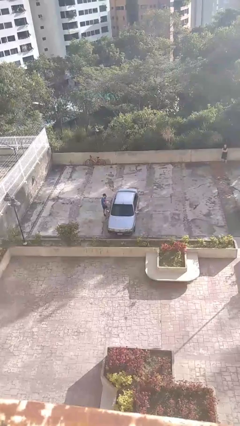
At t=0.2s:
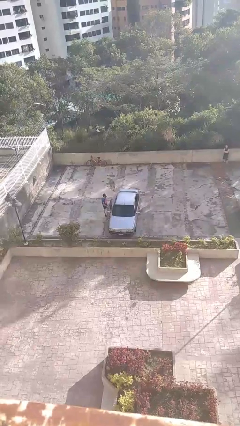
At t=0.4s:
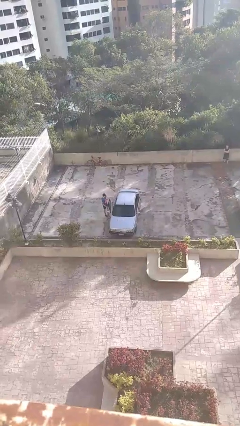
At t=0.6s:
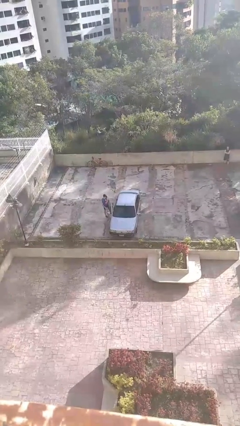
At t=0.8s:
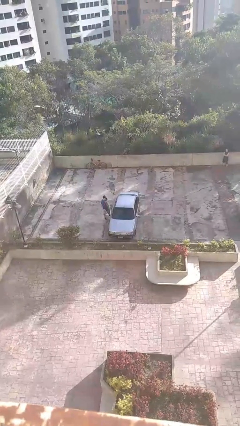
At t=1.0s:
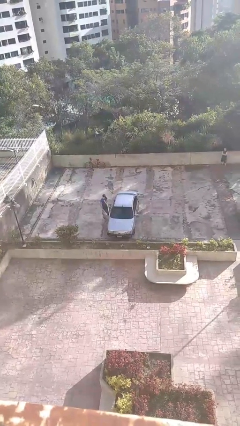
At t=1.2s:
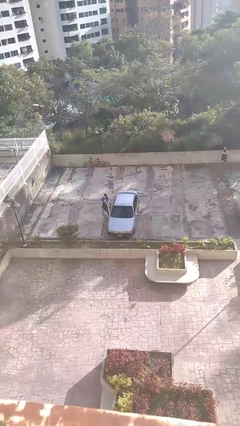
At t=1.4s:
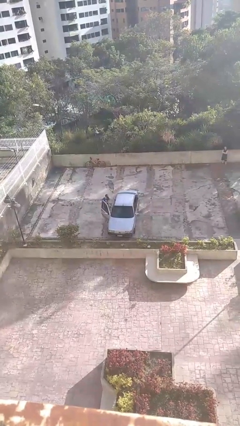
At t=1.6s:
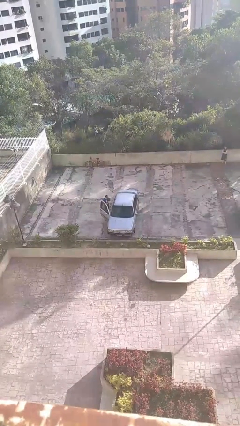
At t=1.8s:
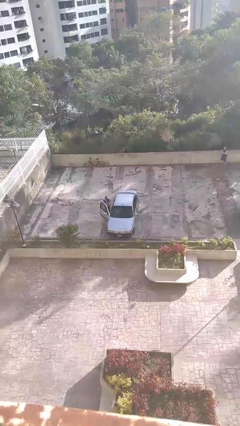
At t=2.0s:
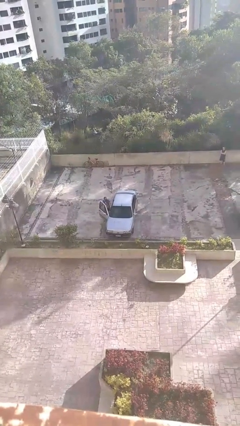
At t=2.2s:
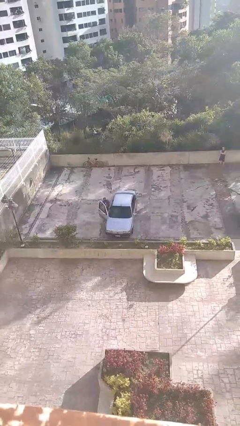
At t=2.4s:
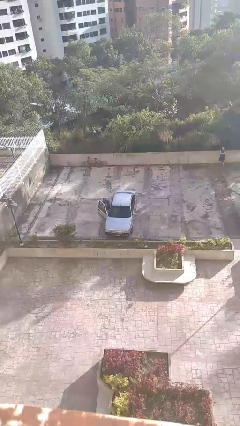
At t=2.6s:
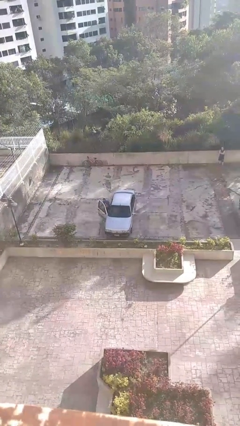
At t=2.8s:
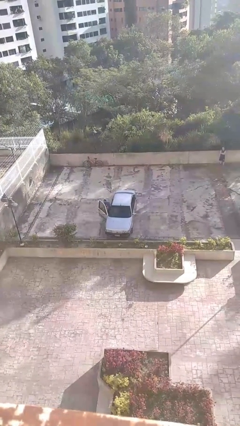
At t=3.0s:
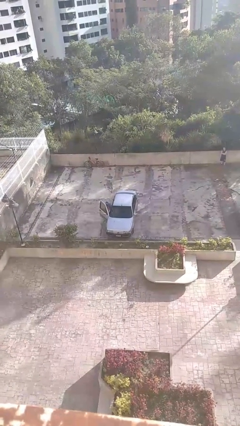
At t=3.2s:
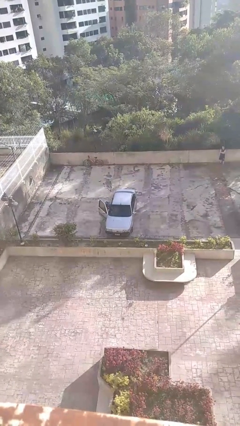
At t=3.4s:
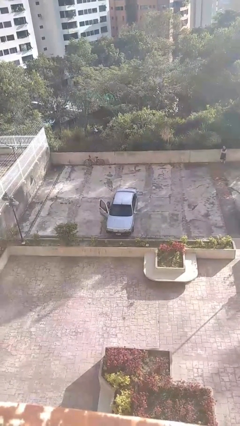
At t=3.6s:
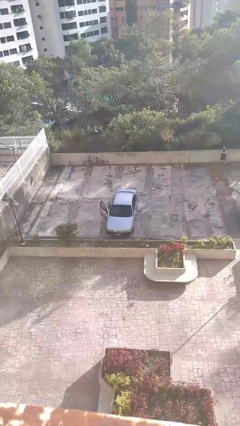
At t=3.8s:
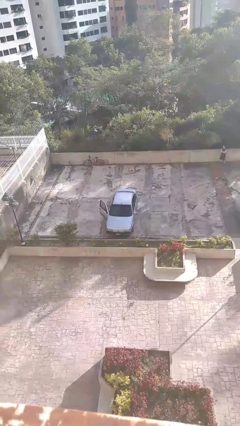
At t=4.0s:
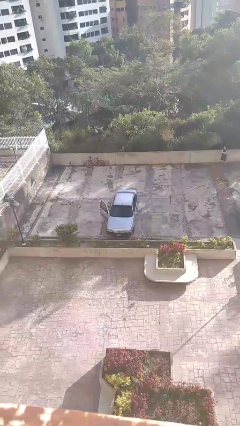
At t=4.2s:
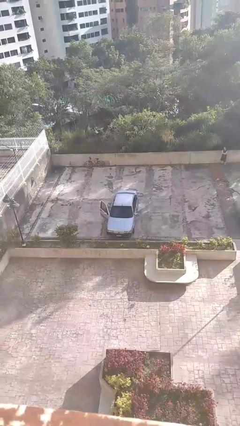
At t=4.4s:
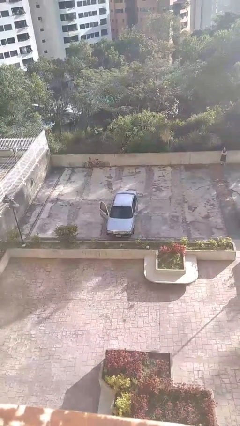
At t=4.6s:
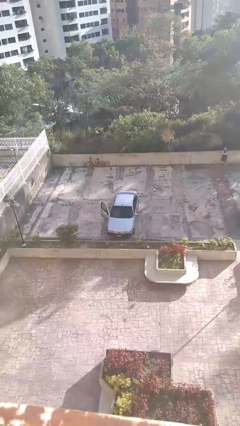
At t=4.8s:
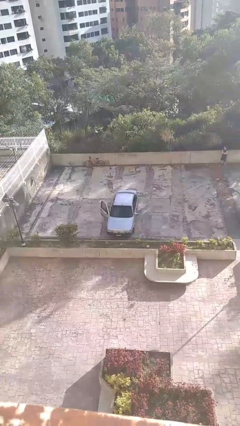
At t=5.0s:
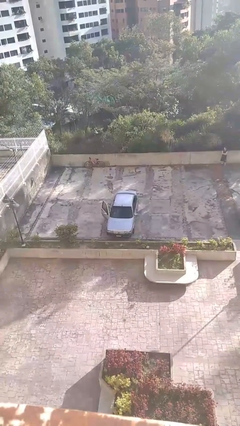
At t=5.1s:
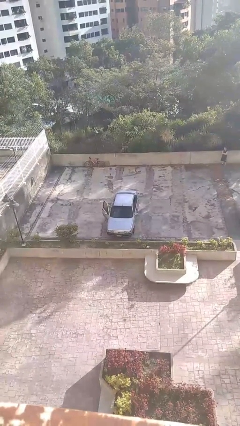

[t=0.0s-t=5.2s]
car picks up person

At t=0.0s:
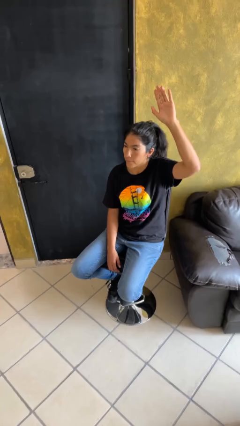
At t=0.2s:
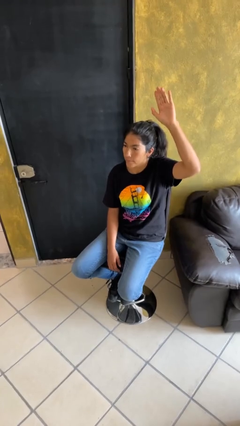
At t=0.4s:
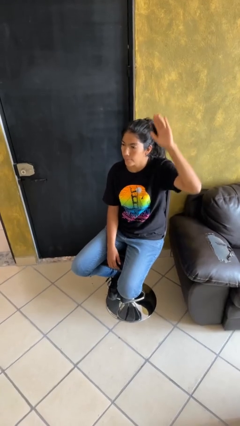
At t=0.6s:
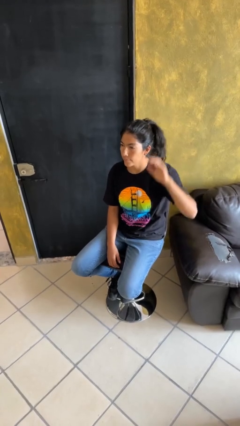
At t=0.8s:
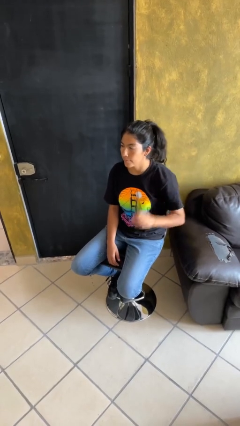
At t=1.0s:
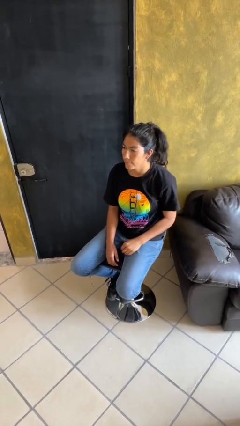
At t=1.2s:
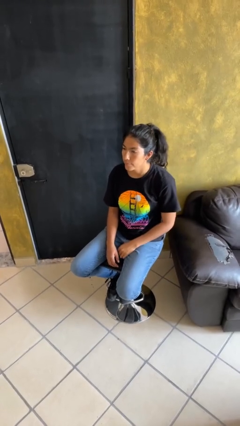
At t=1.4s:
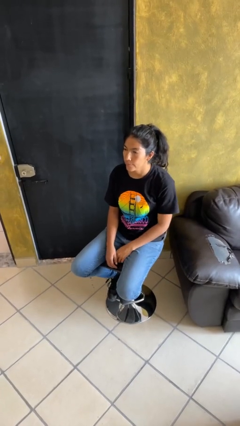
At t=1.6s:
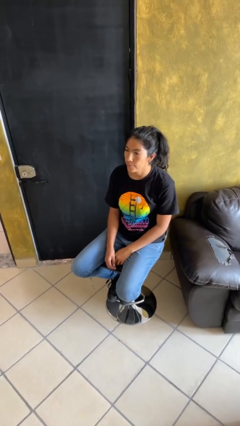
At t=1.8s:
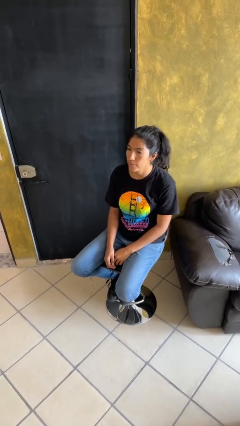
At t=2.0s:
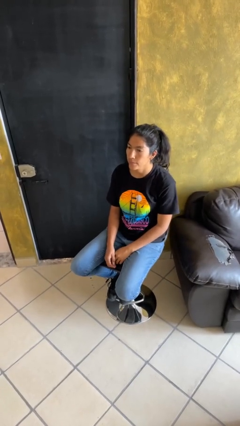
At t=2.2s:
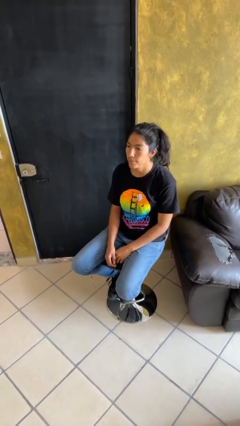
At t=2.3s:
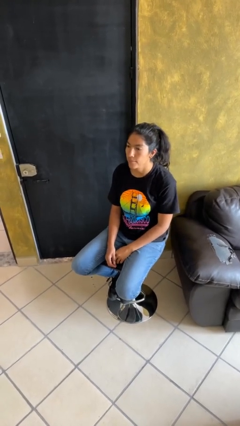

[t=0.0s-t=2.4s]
person gestures lower hand

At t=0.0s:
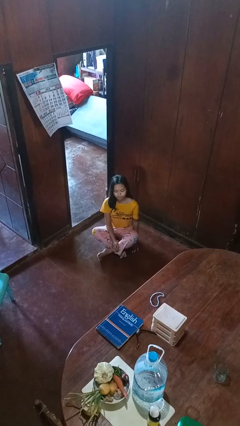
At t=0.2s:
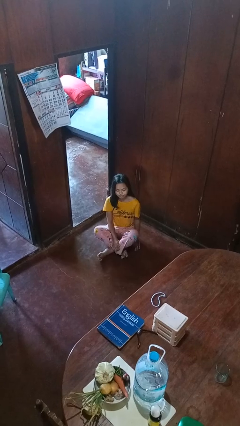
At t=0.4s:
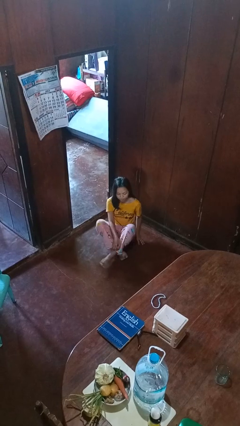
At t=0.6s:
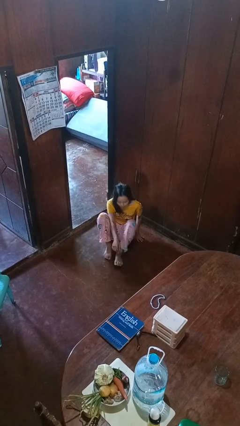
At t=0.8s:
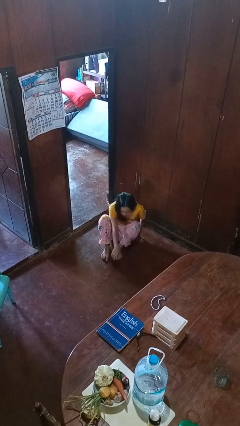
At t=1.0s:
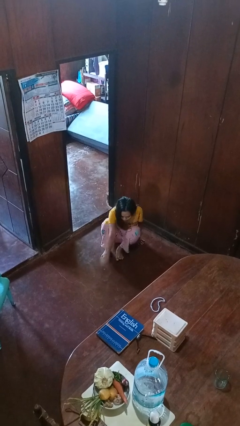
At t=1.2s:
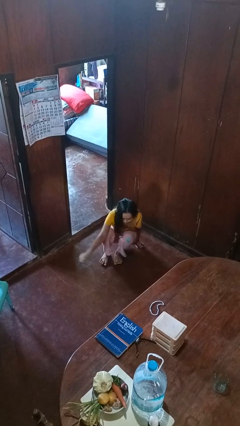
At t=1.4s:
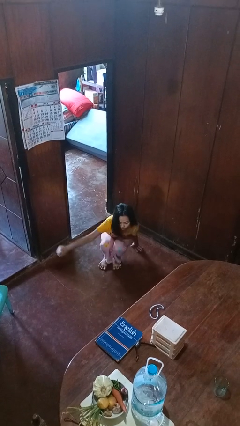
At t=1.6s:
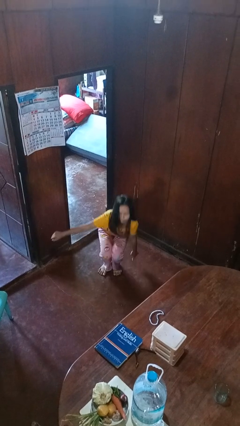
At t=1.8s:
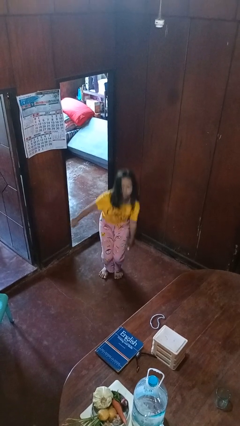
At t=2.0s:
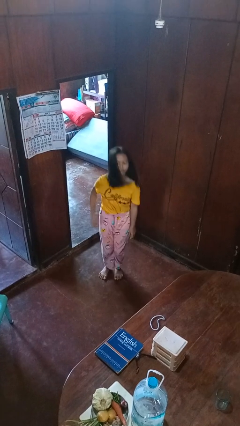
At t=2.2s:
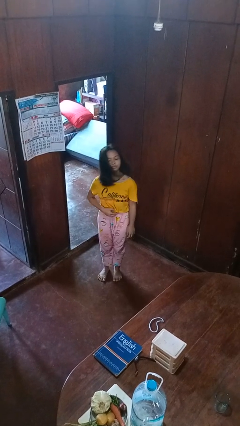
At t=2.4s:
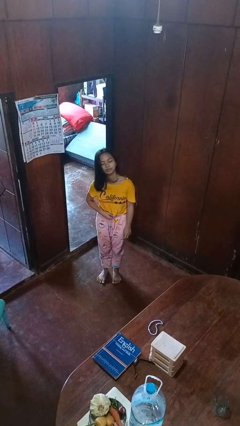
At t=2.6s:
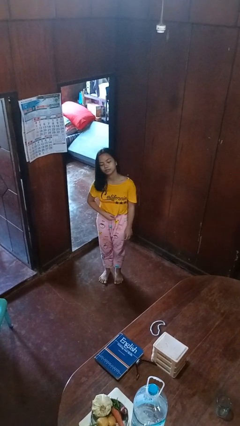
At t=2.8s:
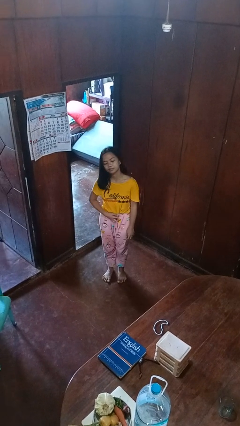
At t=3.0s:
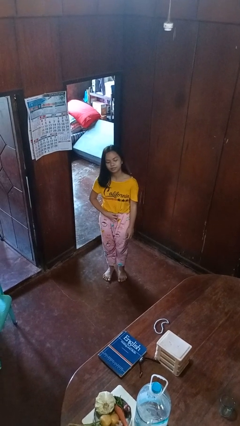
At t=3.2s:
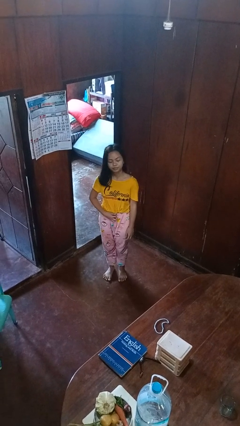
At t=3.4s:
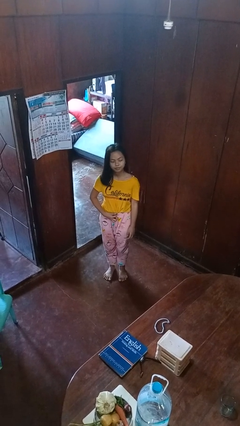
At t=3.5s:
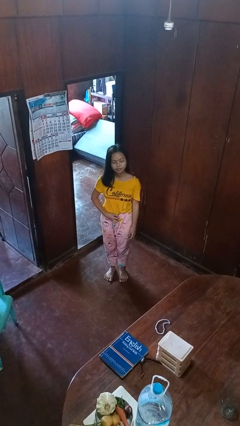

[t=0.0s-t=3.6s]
person stands up from floor

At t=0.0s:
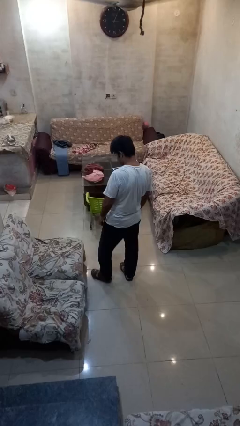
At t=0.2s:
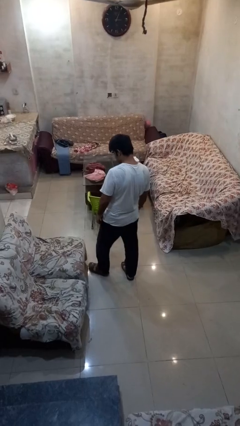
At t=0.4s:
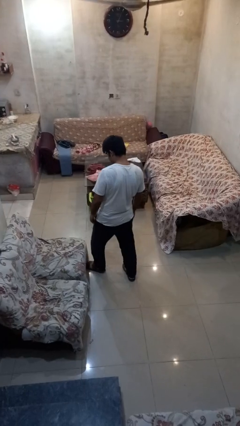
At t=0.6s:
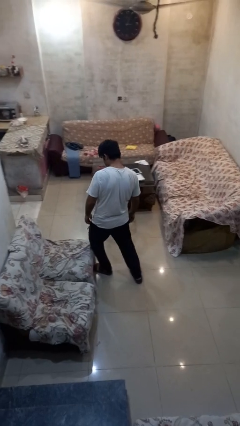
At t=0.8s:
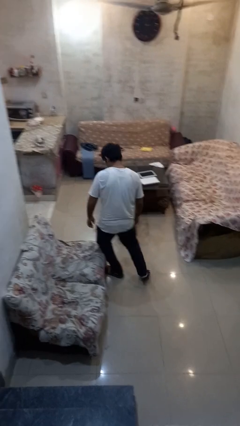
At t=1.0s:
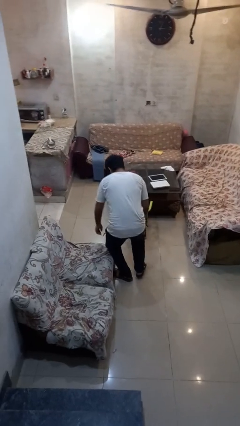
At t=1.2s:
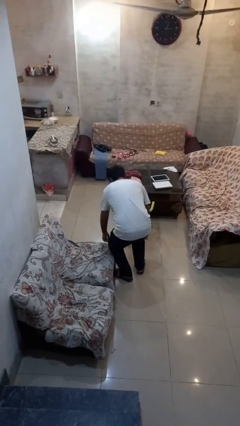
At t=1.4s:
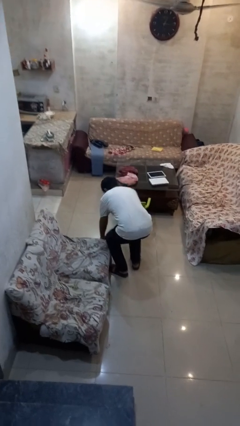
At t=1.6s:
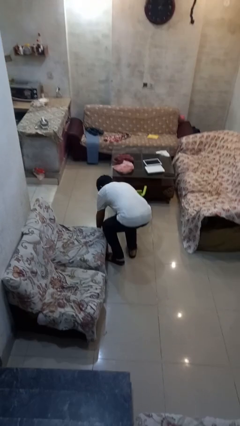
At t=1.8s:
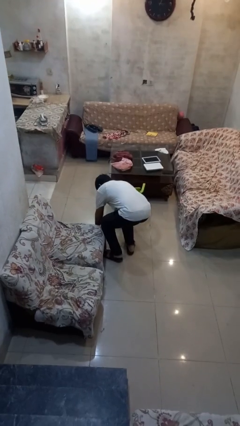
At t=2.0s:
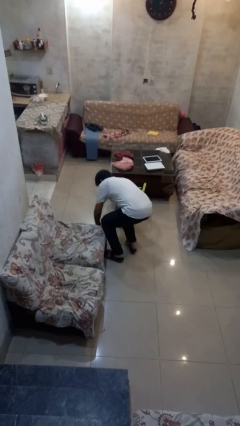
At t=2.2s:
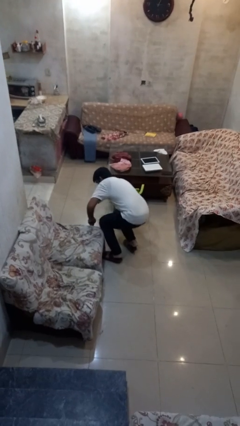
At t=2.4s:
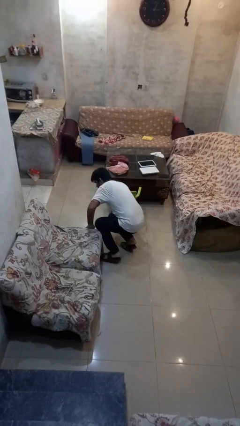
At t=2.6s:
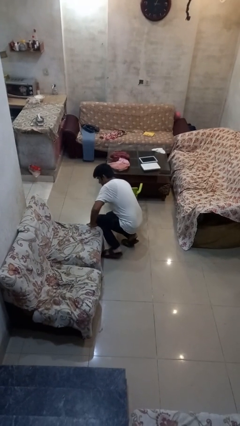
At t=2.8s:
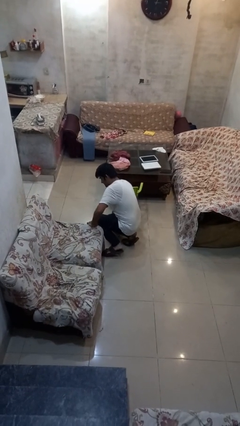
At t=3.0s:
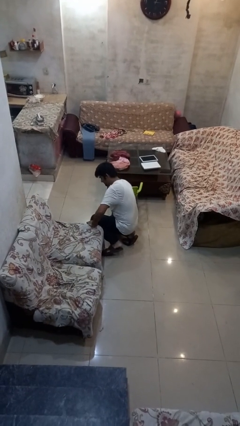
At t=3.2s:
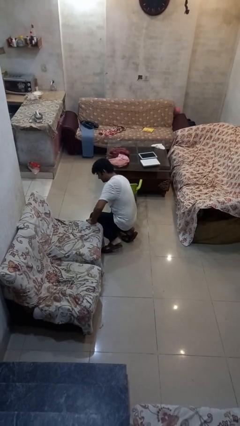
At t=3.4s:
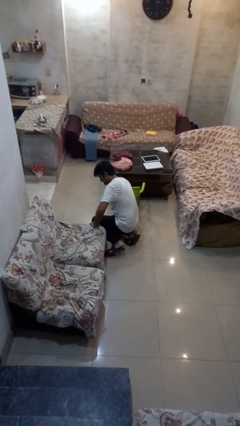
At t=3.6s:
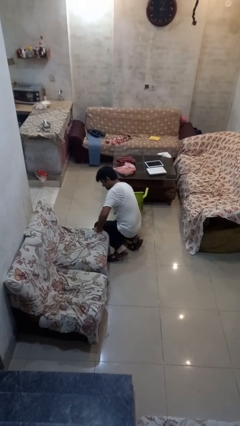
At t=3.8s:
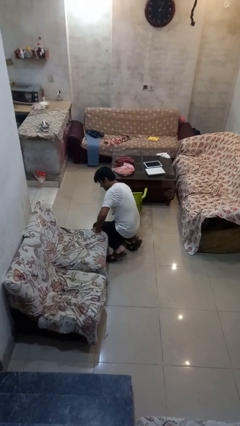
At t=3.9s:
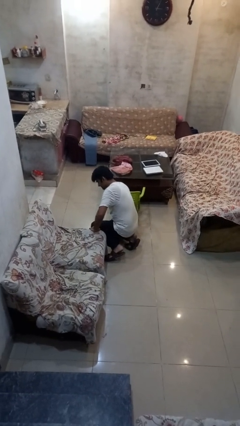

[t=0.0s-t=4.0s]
person trips on object on floor

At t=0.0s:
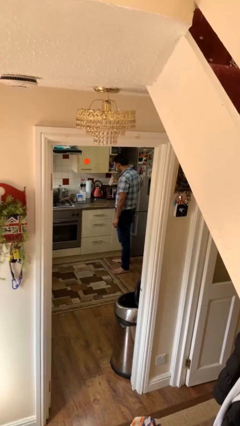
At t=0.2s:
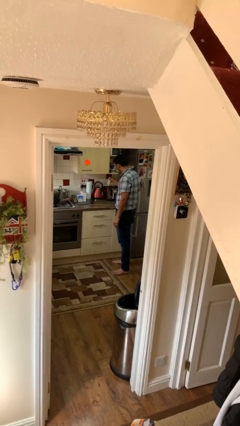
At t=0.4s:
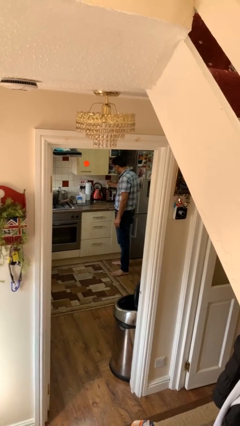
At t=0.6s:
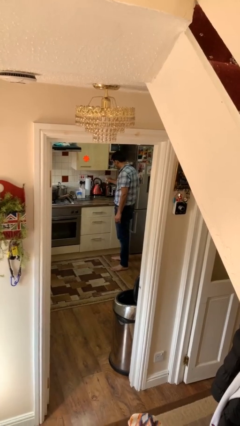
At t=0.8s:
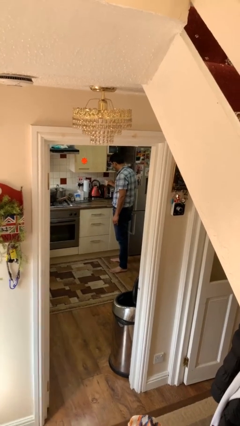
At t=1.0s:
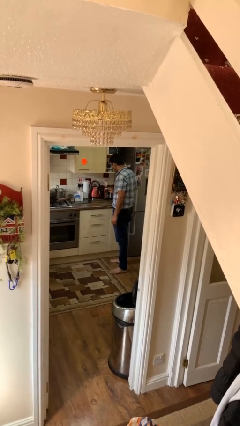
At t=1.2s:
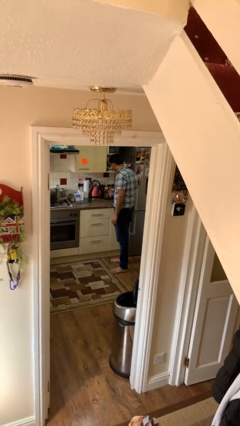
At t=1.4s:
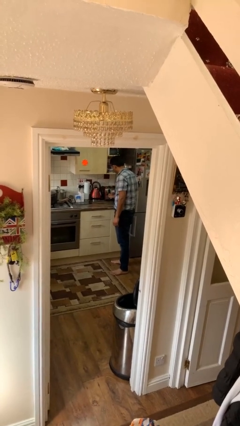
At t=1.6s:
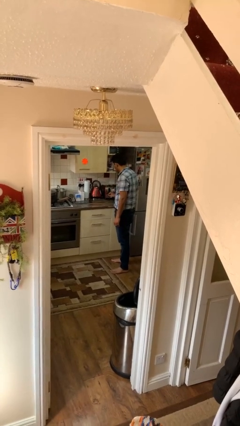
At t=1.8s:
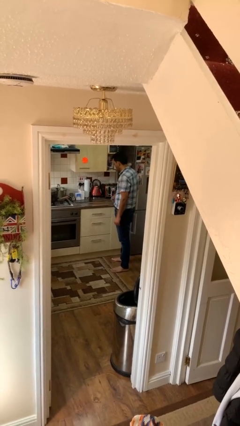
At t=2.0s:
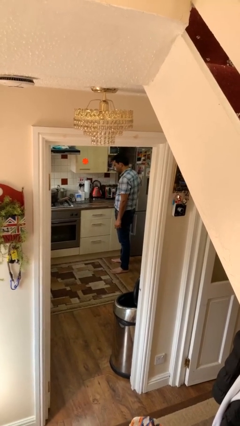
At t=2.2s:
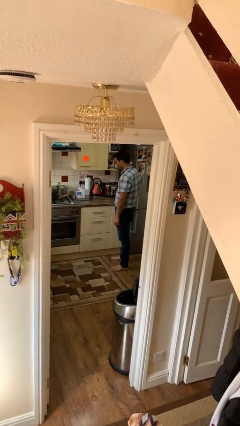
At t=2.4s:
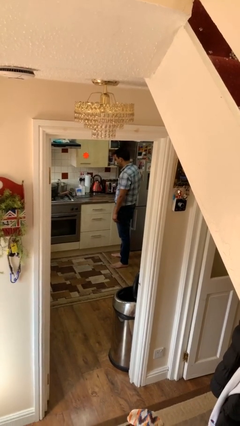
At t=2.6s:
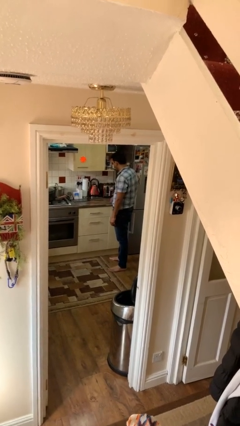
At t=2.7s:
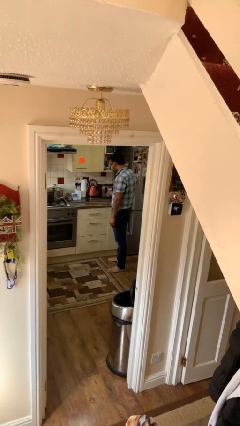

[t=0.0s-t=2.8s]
person puts object into toaster
